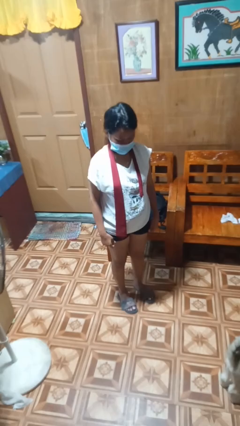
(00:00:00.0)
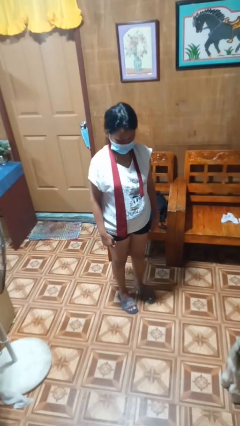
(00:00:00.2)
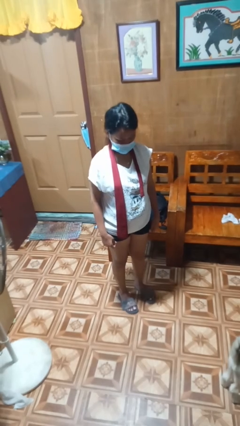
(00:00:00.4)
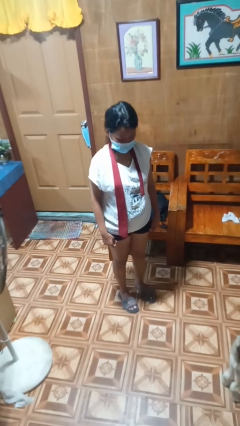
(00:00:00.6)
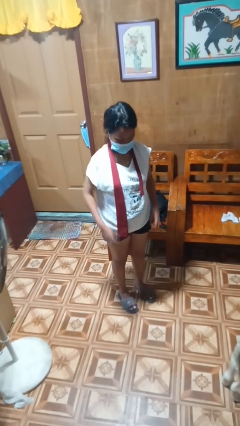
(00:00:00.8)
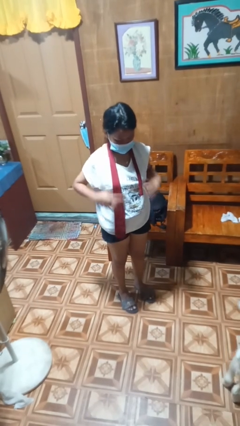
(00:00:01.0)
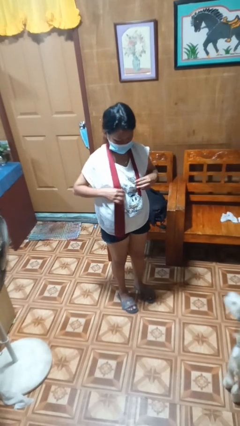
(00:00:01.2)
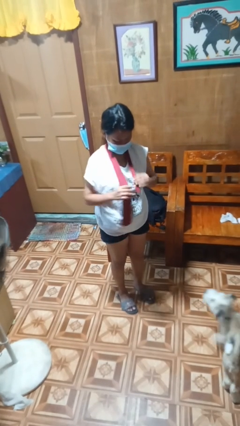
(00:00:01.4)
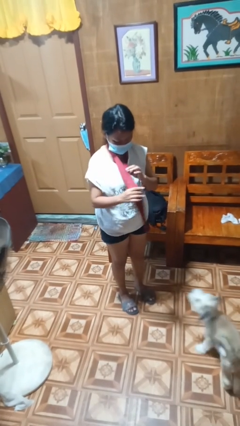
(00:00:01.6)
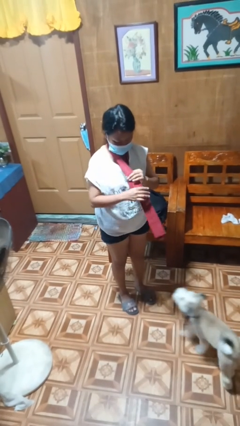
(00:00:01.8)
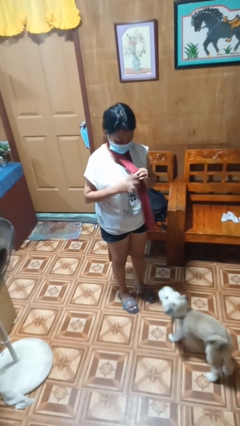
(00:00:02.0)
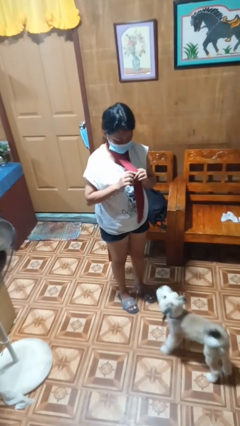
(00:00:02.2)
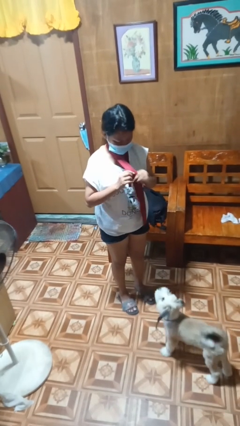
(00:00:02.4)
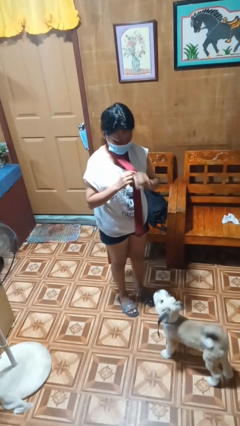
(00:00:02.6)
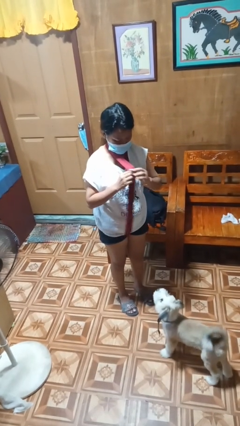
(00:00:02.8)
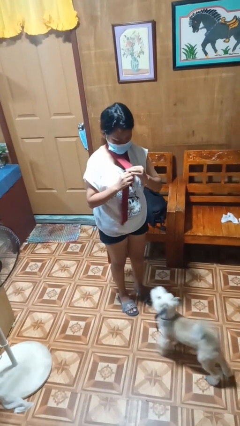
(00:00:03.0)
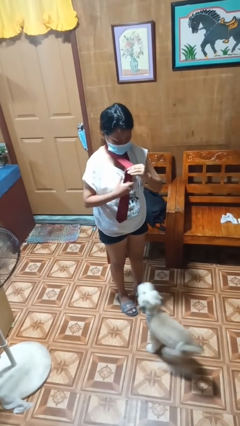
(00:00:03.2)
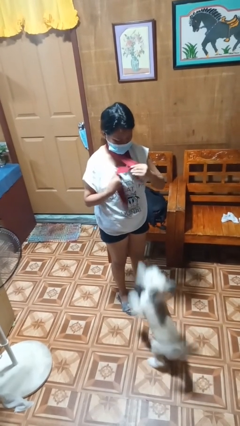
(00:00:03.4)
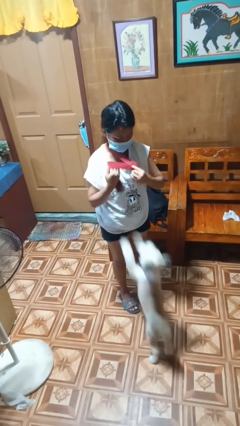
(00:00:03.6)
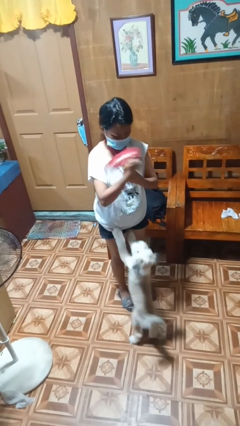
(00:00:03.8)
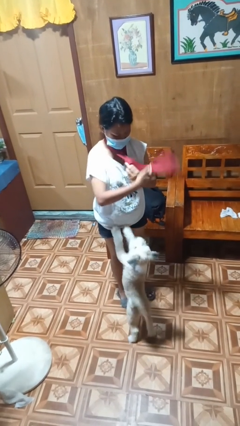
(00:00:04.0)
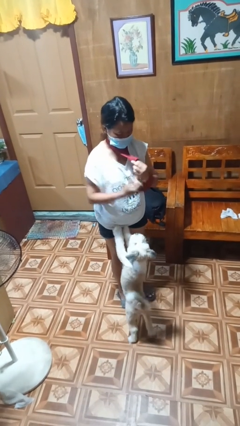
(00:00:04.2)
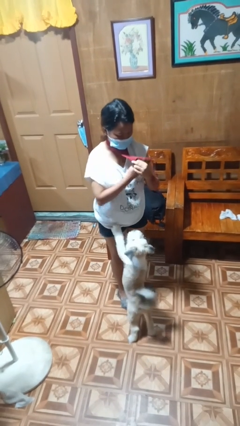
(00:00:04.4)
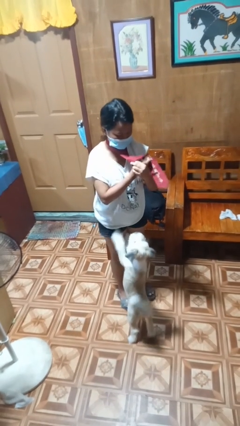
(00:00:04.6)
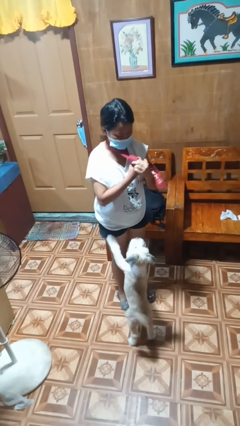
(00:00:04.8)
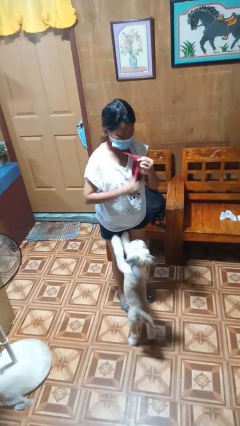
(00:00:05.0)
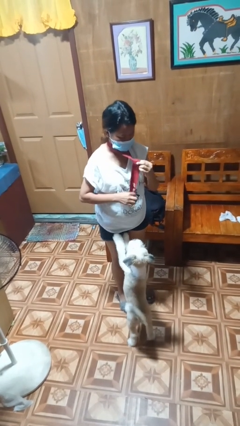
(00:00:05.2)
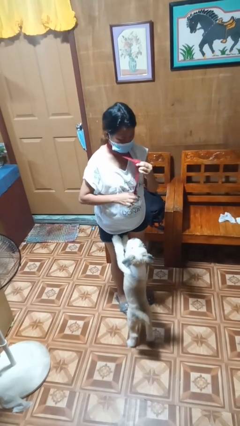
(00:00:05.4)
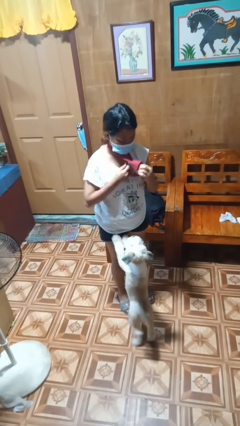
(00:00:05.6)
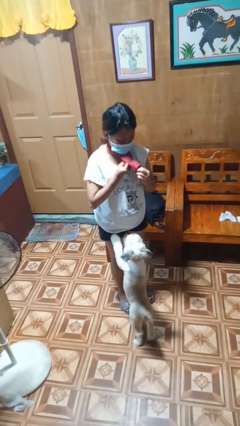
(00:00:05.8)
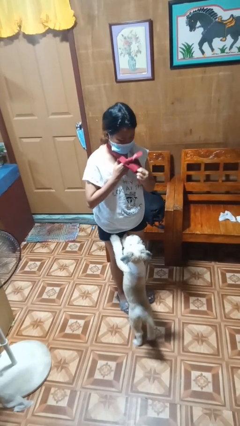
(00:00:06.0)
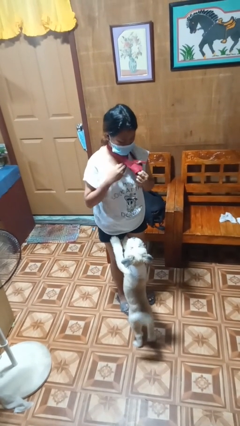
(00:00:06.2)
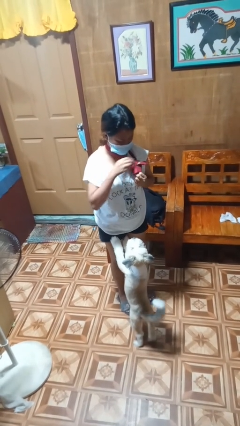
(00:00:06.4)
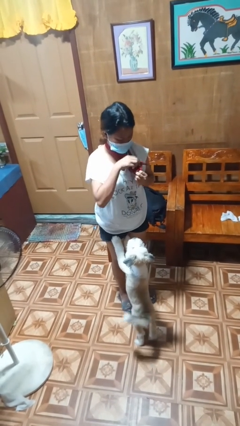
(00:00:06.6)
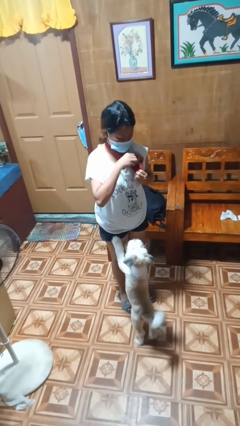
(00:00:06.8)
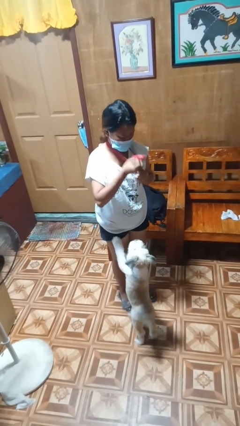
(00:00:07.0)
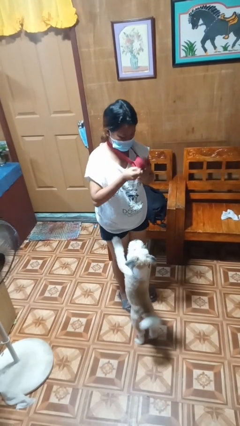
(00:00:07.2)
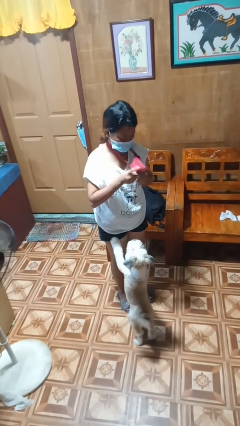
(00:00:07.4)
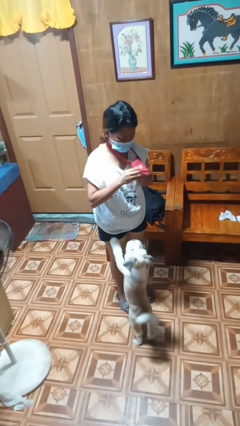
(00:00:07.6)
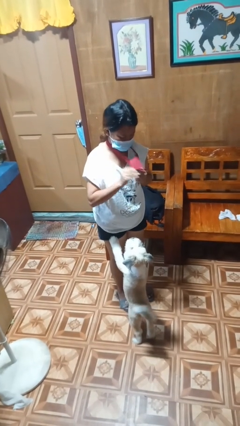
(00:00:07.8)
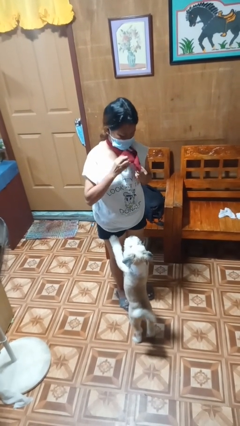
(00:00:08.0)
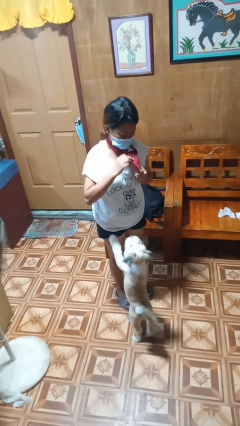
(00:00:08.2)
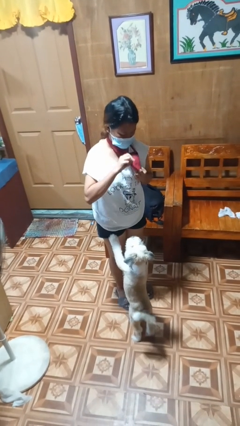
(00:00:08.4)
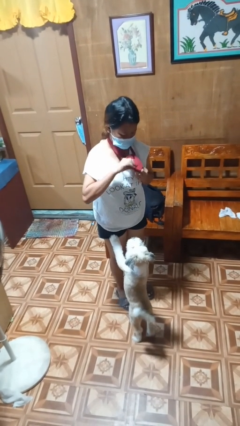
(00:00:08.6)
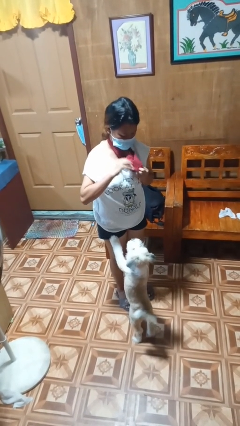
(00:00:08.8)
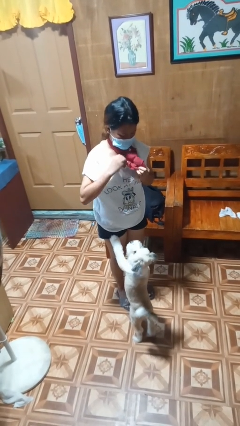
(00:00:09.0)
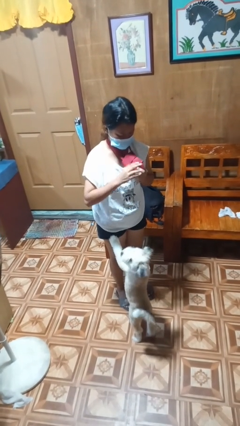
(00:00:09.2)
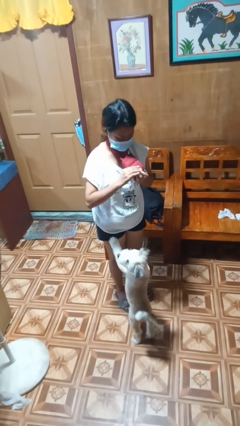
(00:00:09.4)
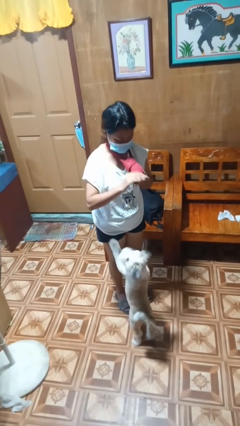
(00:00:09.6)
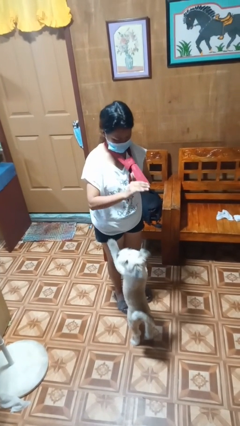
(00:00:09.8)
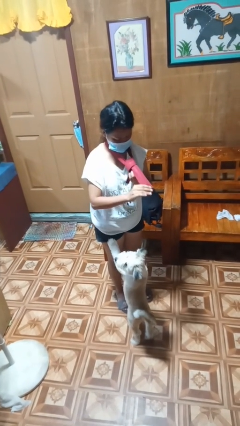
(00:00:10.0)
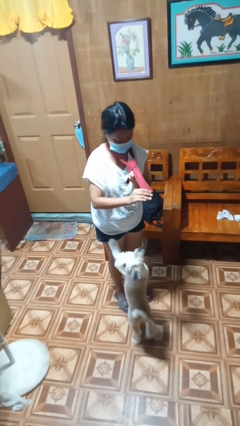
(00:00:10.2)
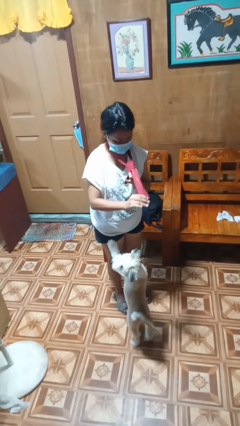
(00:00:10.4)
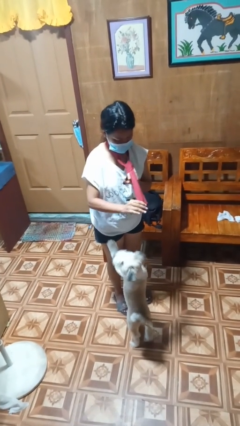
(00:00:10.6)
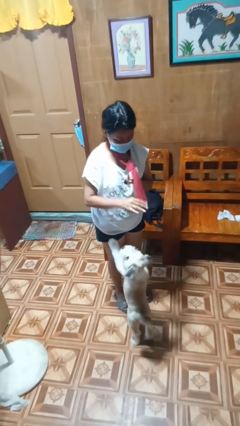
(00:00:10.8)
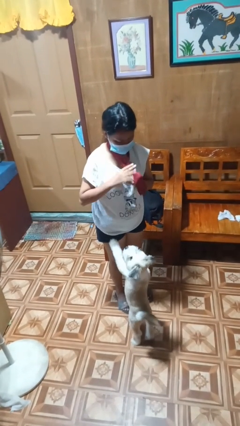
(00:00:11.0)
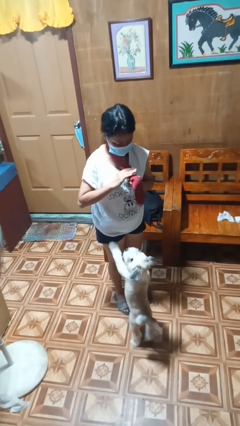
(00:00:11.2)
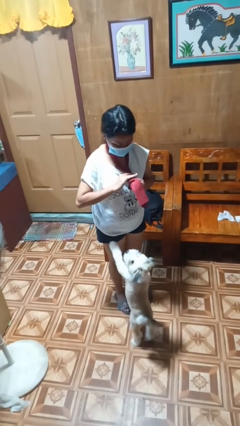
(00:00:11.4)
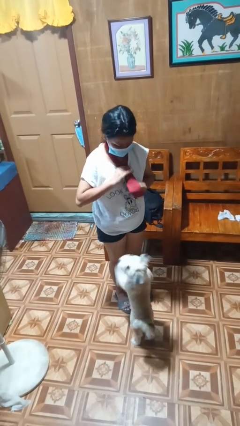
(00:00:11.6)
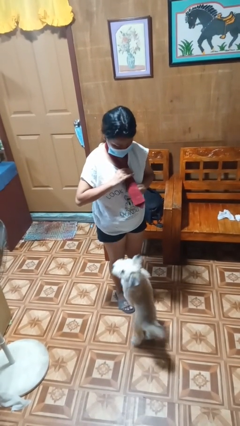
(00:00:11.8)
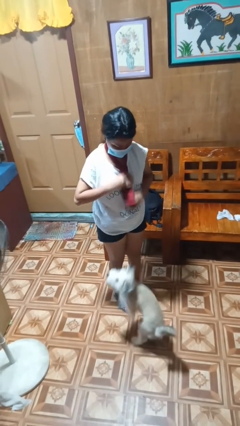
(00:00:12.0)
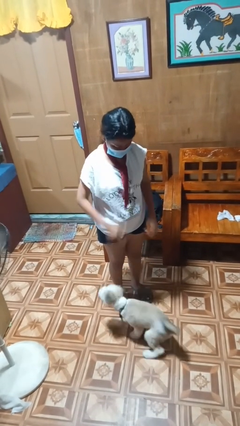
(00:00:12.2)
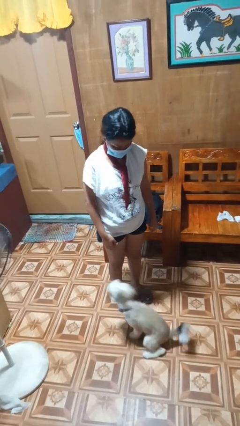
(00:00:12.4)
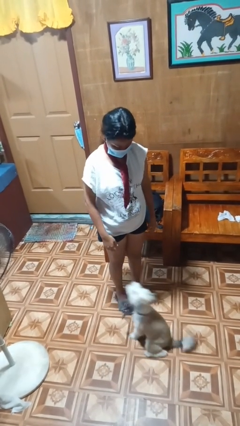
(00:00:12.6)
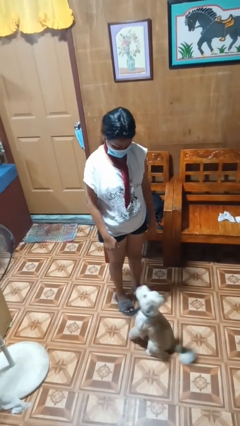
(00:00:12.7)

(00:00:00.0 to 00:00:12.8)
person puts on necktie

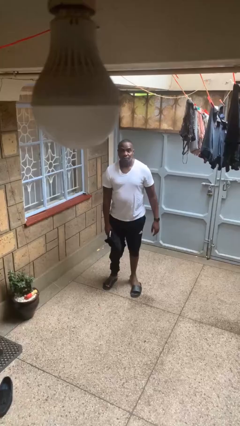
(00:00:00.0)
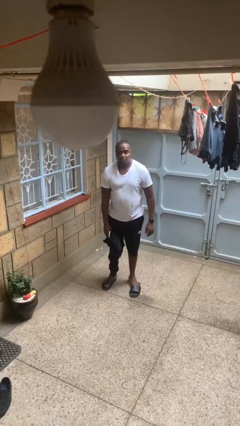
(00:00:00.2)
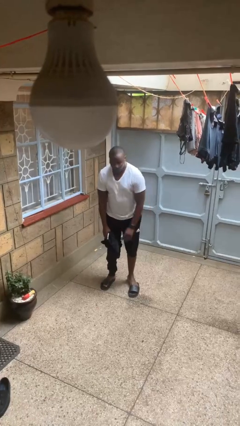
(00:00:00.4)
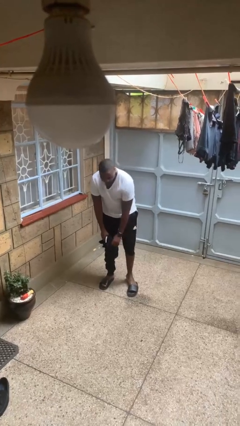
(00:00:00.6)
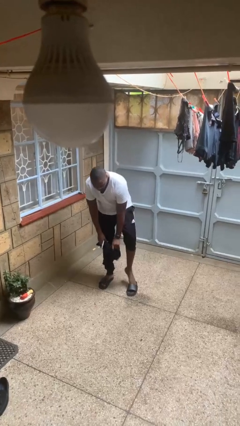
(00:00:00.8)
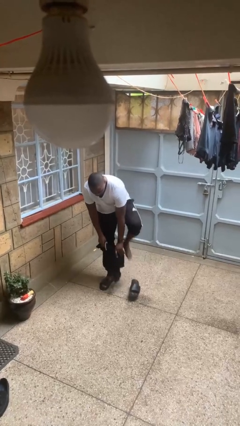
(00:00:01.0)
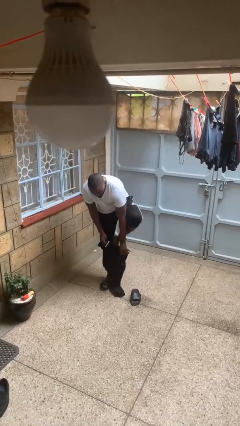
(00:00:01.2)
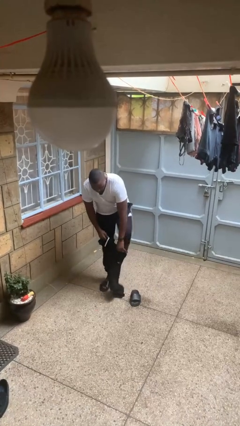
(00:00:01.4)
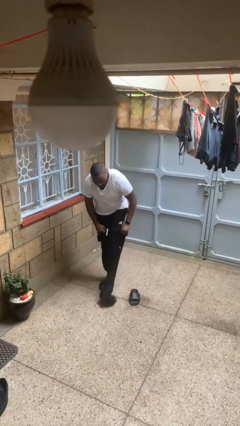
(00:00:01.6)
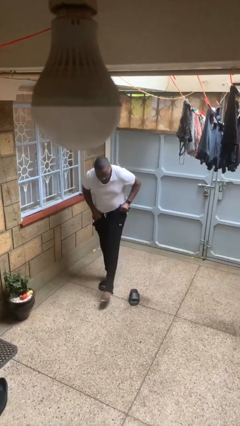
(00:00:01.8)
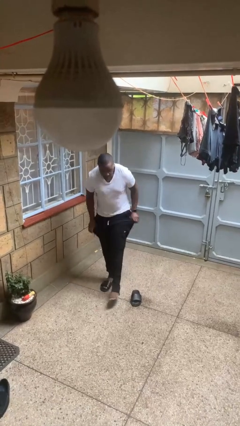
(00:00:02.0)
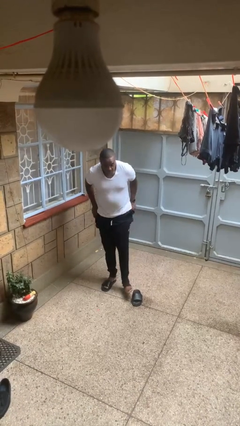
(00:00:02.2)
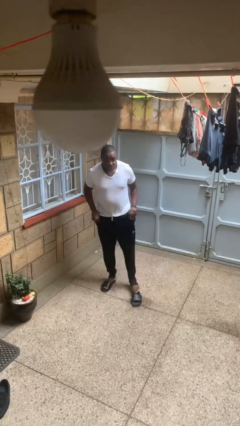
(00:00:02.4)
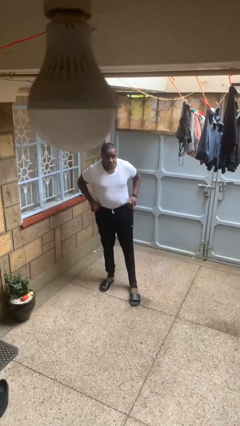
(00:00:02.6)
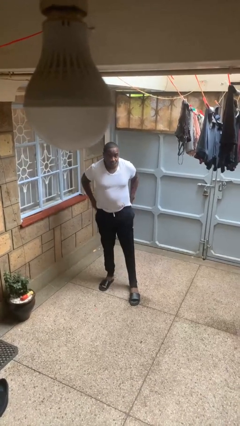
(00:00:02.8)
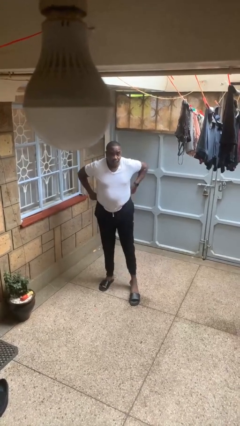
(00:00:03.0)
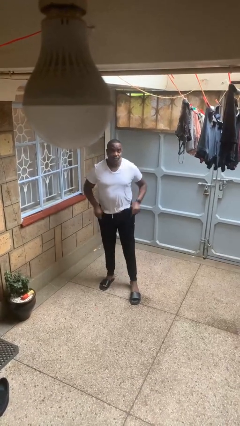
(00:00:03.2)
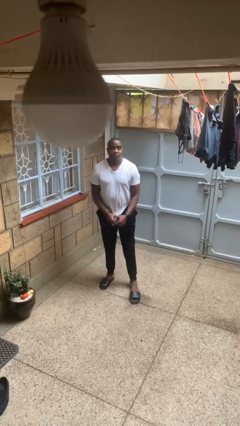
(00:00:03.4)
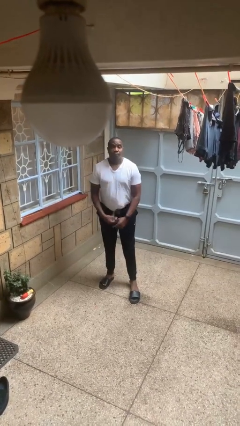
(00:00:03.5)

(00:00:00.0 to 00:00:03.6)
person puts on pants

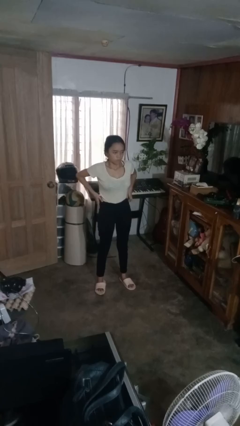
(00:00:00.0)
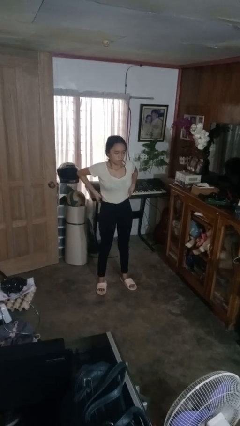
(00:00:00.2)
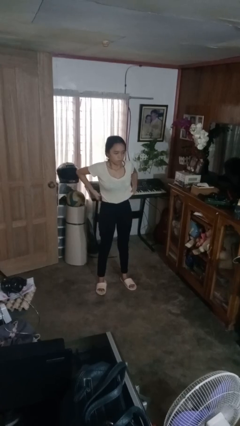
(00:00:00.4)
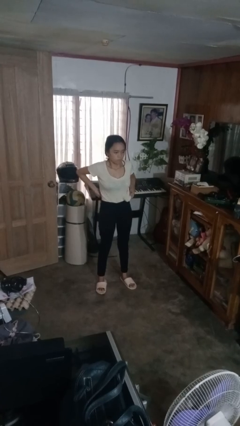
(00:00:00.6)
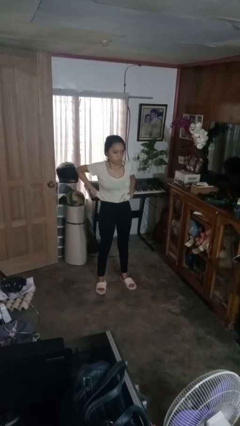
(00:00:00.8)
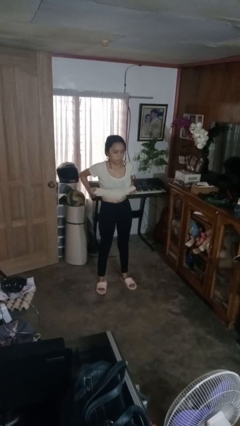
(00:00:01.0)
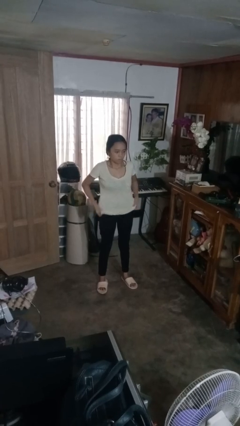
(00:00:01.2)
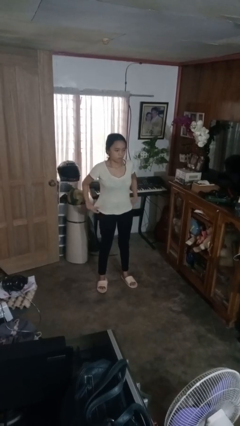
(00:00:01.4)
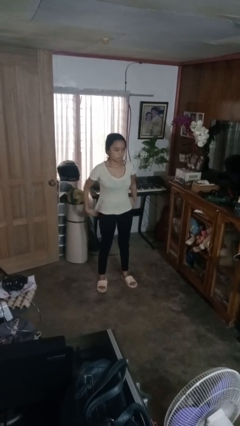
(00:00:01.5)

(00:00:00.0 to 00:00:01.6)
person untucks shirt
